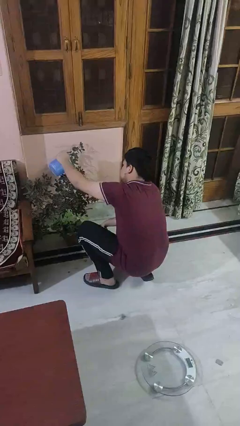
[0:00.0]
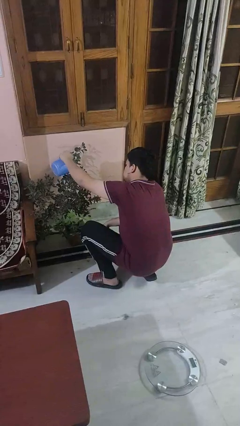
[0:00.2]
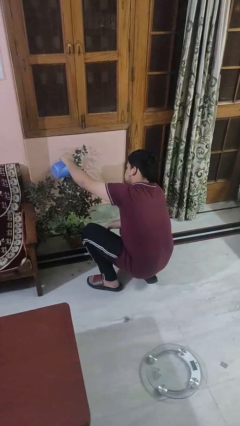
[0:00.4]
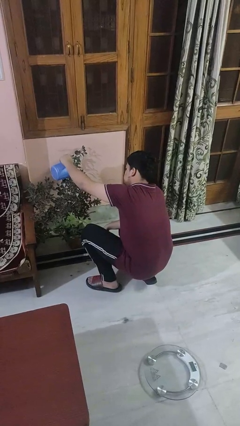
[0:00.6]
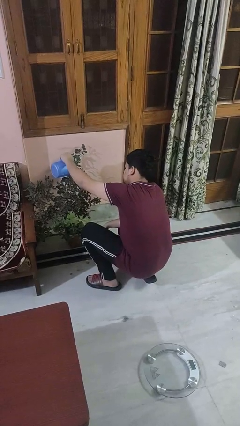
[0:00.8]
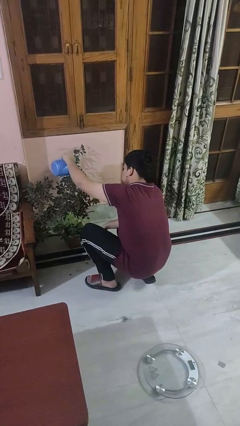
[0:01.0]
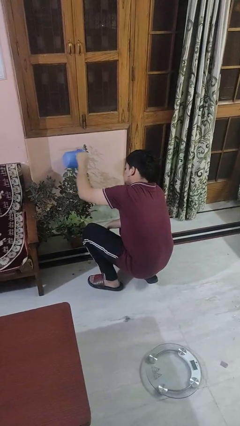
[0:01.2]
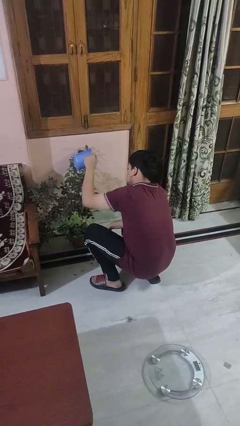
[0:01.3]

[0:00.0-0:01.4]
person waters houseplant

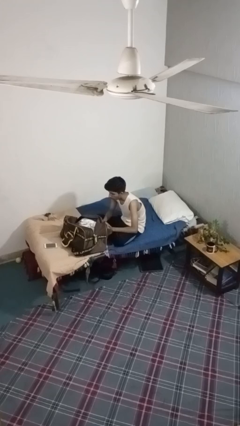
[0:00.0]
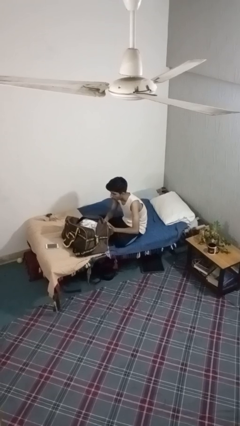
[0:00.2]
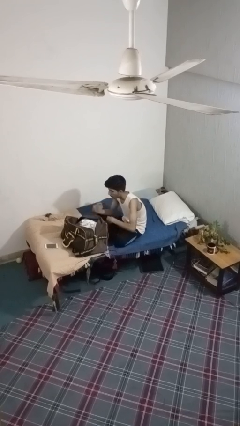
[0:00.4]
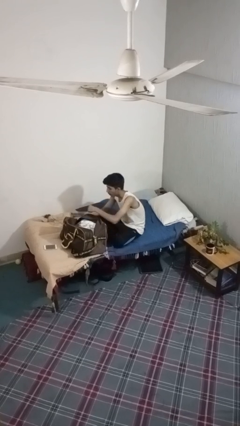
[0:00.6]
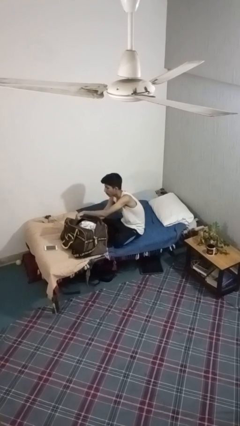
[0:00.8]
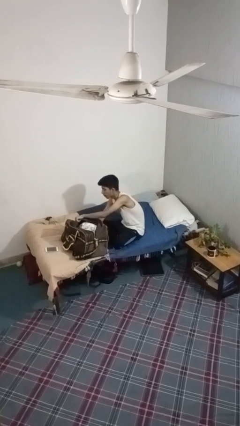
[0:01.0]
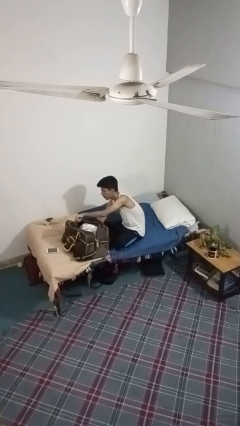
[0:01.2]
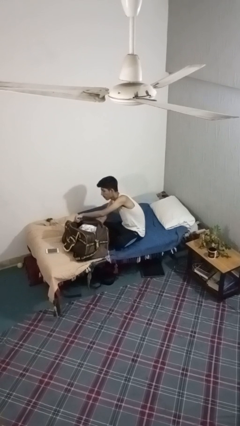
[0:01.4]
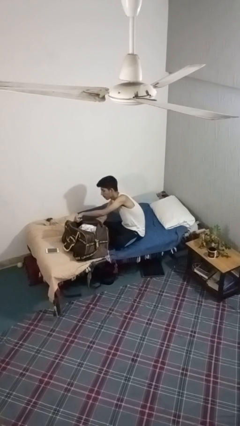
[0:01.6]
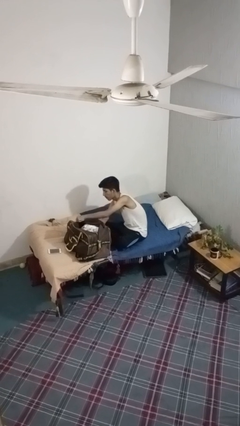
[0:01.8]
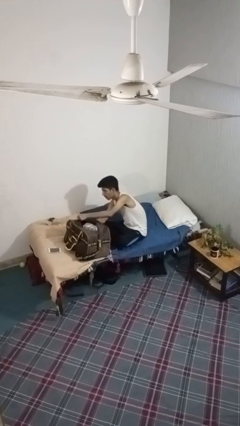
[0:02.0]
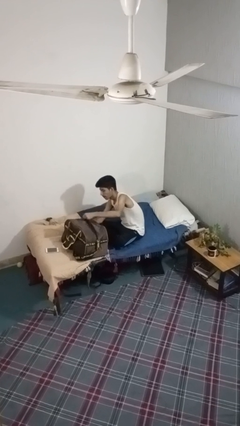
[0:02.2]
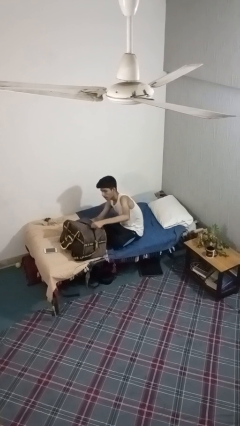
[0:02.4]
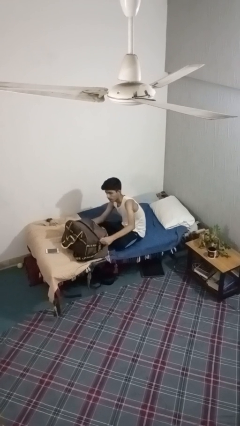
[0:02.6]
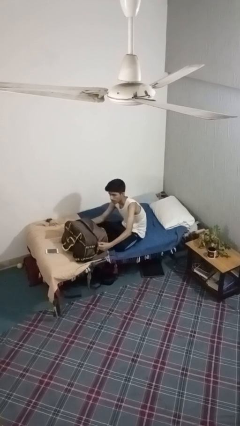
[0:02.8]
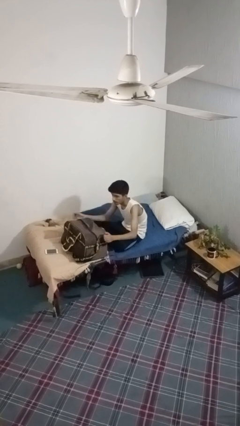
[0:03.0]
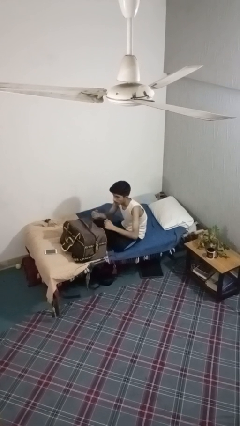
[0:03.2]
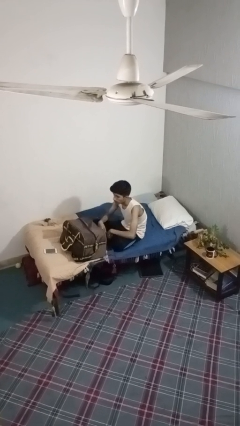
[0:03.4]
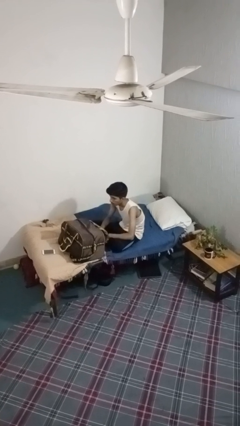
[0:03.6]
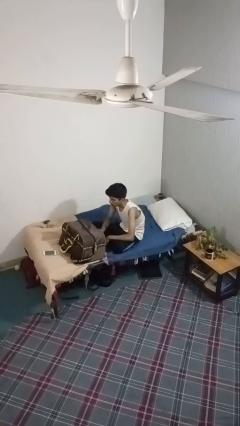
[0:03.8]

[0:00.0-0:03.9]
person closes suitcase

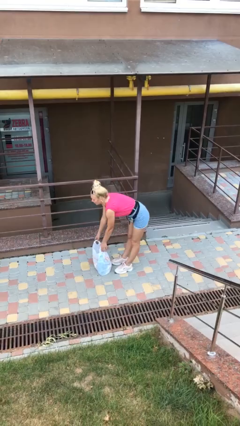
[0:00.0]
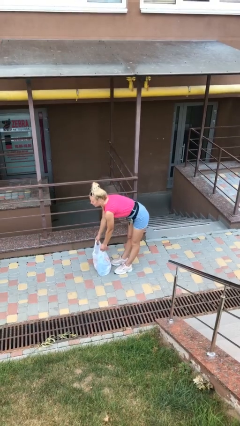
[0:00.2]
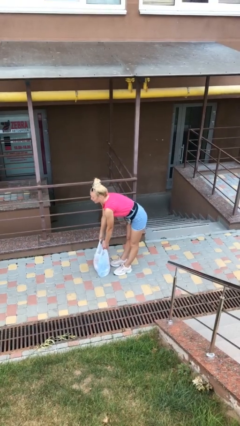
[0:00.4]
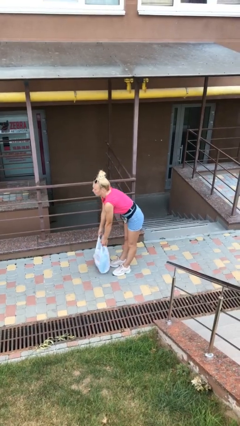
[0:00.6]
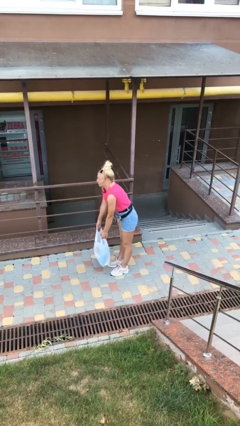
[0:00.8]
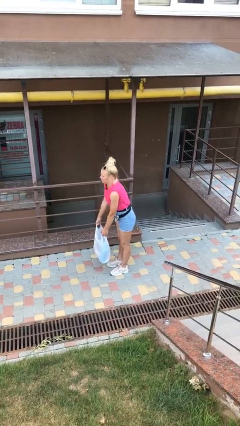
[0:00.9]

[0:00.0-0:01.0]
person picks up object from floor

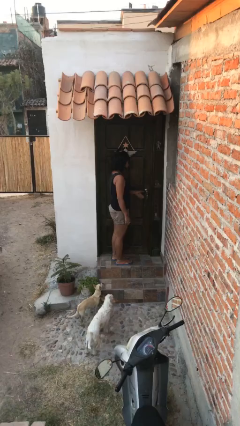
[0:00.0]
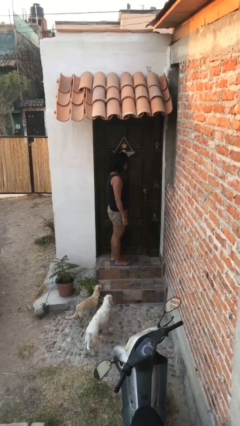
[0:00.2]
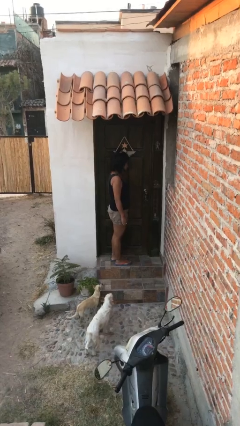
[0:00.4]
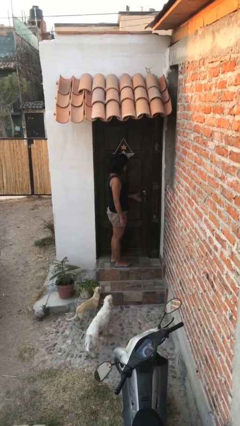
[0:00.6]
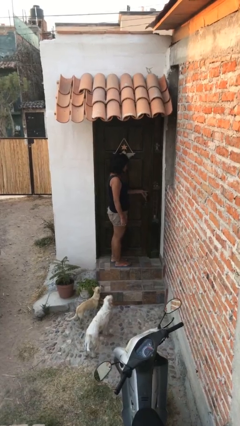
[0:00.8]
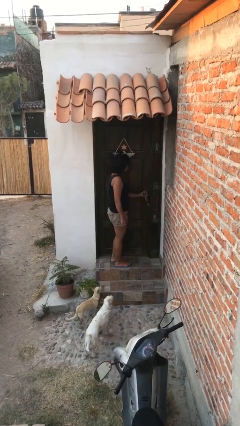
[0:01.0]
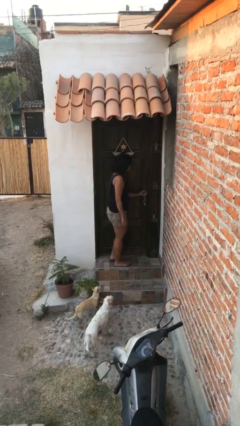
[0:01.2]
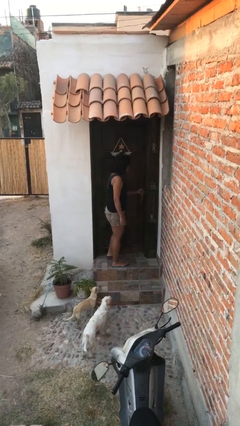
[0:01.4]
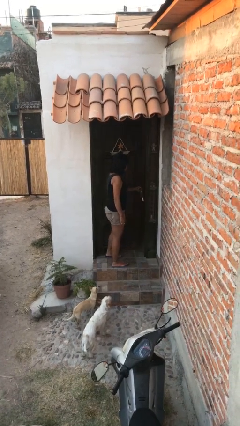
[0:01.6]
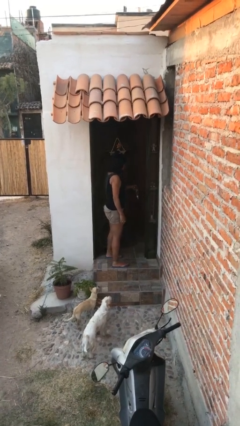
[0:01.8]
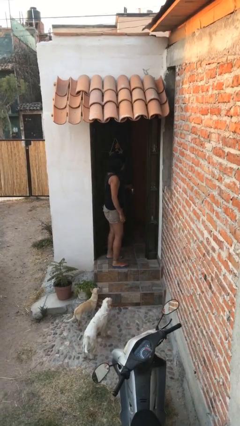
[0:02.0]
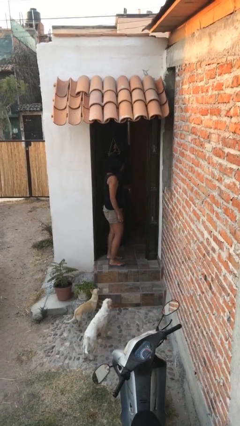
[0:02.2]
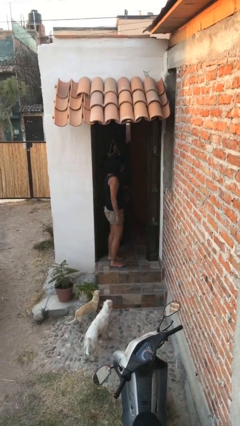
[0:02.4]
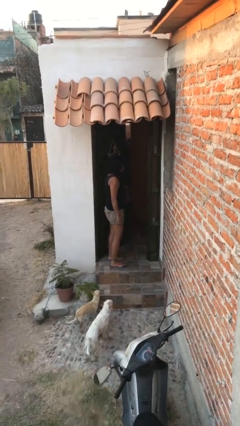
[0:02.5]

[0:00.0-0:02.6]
person opens facility door

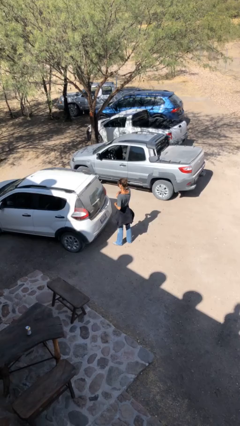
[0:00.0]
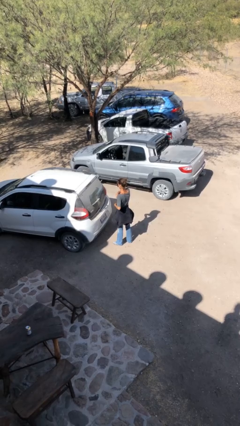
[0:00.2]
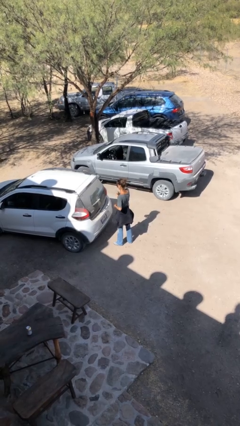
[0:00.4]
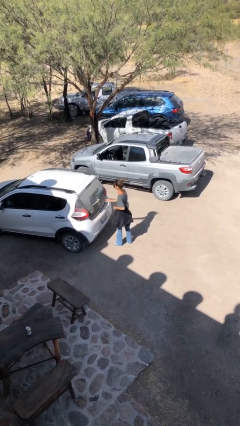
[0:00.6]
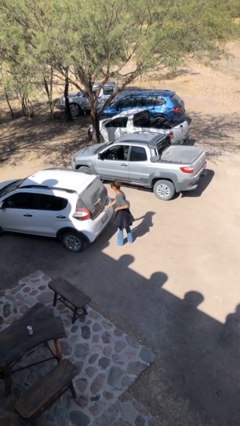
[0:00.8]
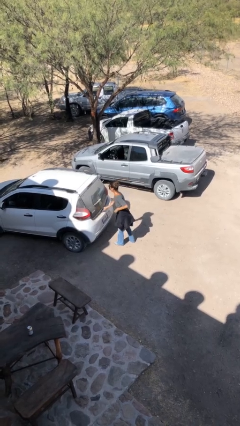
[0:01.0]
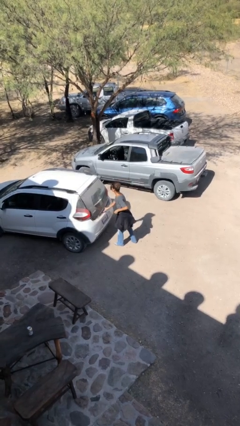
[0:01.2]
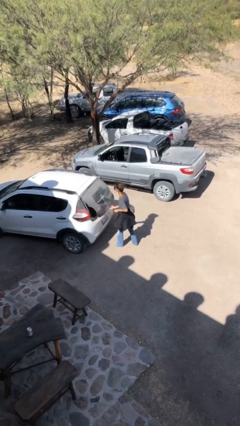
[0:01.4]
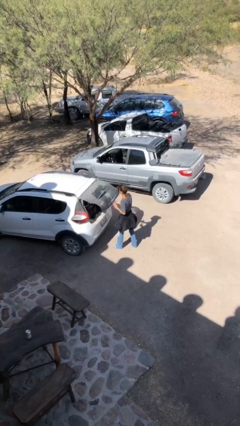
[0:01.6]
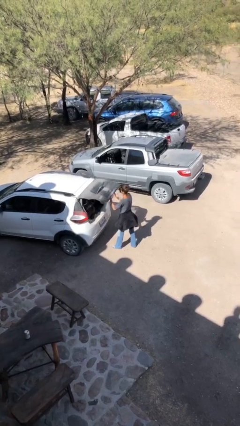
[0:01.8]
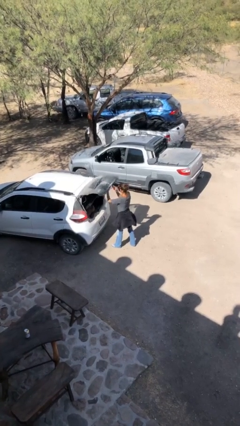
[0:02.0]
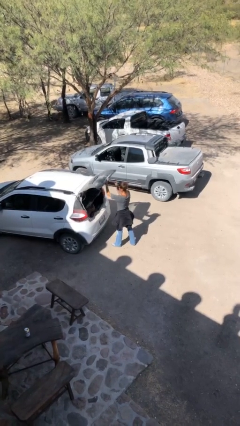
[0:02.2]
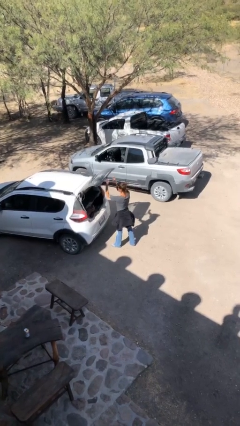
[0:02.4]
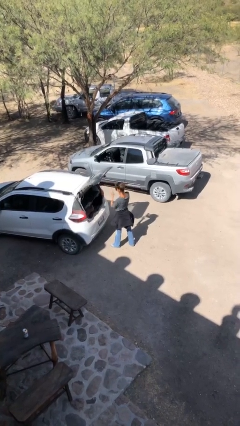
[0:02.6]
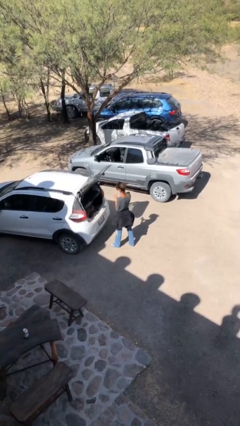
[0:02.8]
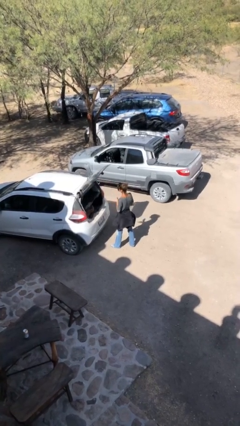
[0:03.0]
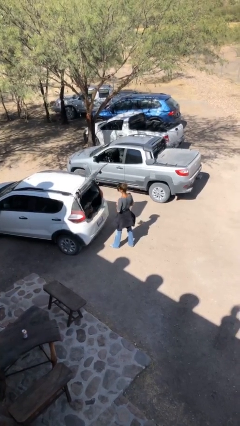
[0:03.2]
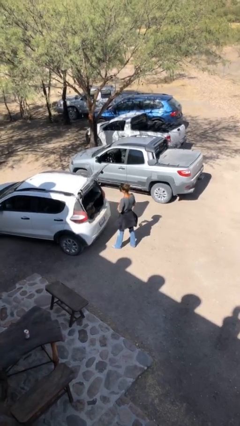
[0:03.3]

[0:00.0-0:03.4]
person opens car trunk

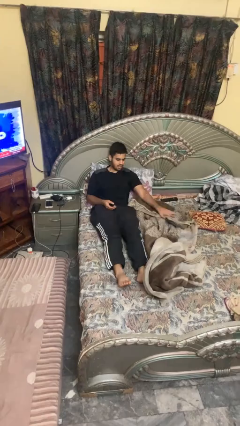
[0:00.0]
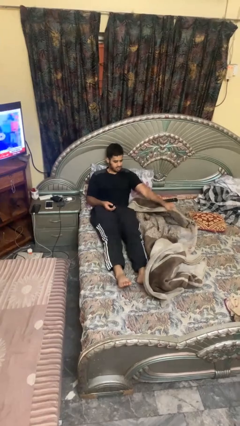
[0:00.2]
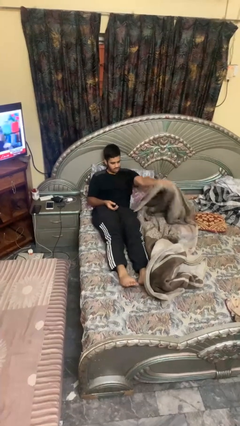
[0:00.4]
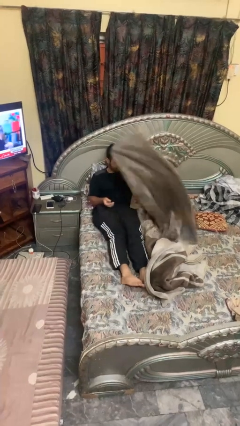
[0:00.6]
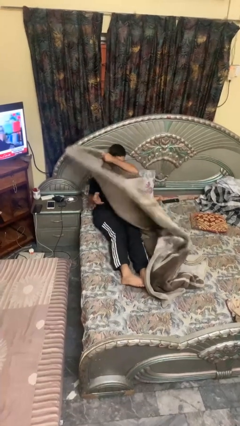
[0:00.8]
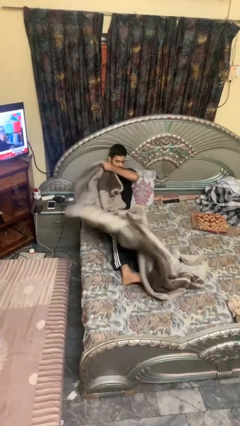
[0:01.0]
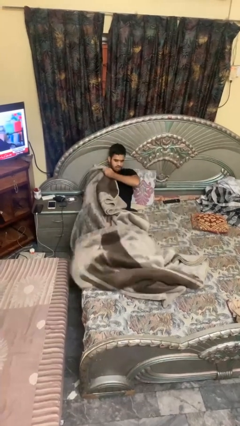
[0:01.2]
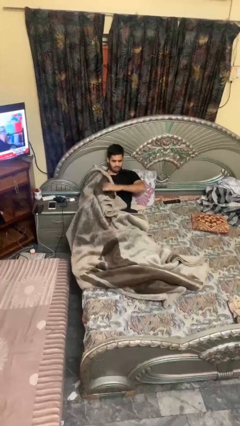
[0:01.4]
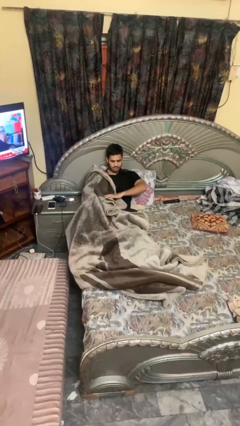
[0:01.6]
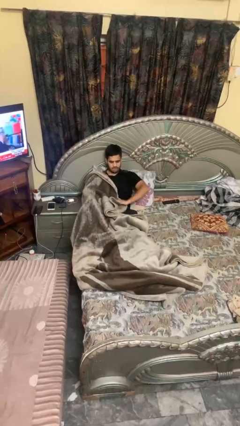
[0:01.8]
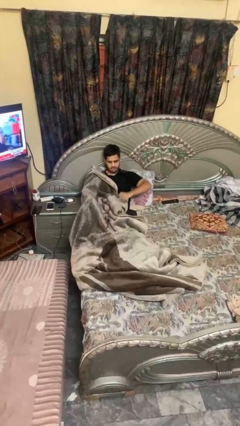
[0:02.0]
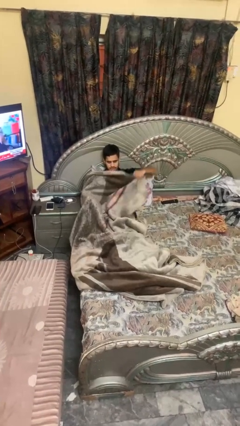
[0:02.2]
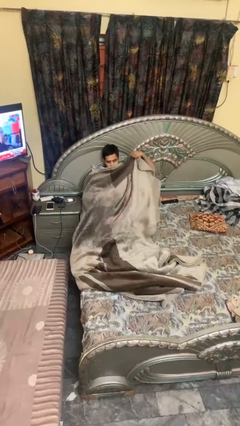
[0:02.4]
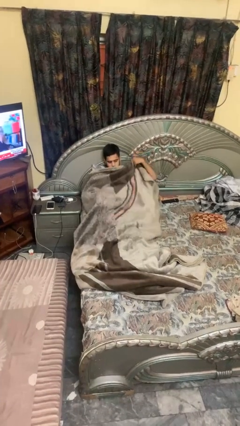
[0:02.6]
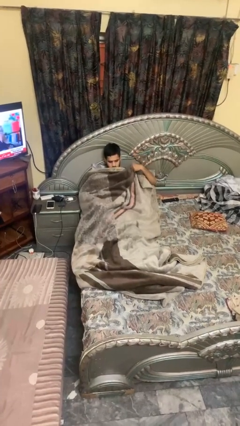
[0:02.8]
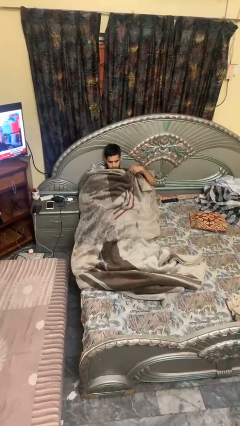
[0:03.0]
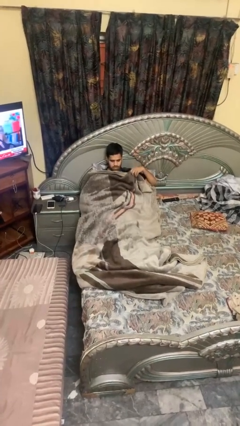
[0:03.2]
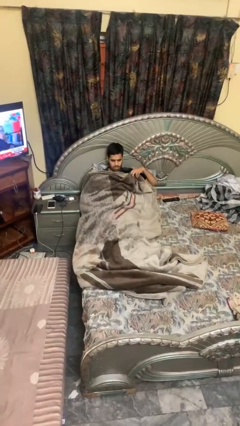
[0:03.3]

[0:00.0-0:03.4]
person covers with blanket

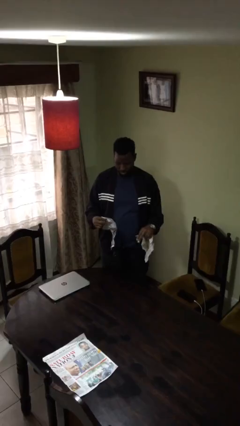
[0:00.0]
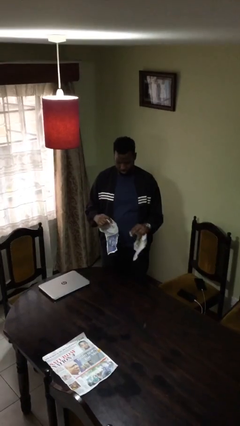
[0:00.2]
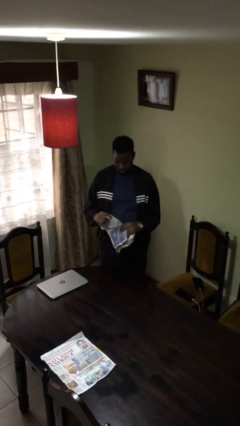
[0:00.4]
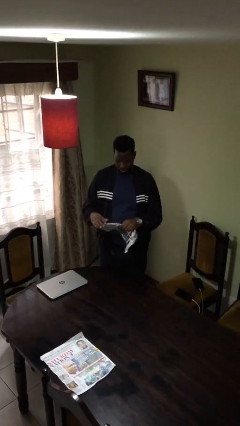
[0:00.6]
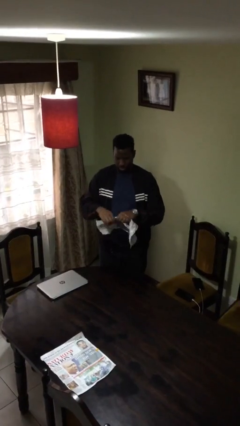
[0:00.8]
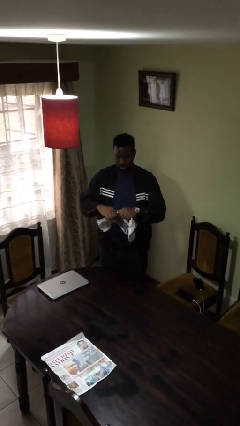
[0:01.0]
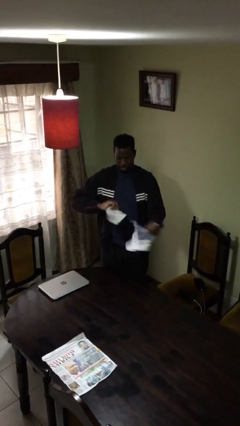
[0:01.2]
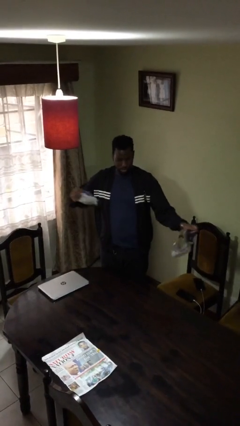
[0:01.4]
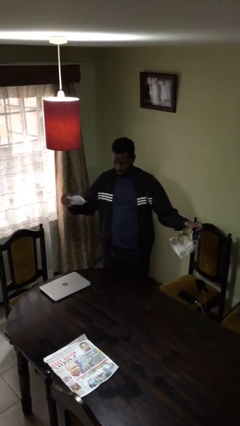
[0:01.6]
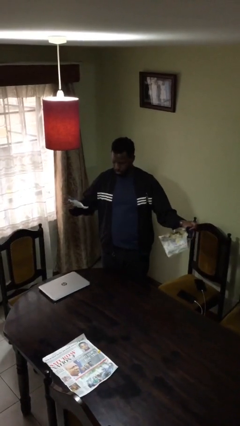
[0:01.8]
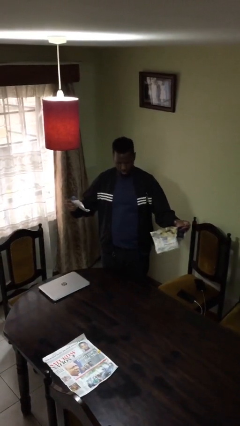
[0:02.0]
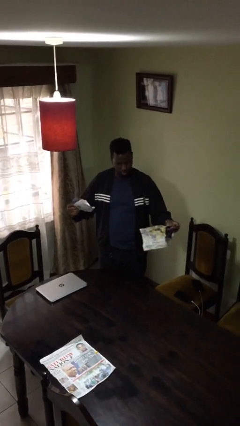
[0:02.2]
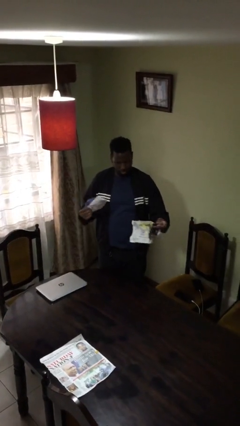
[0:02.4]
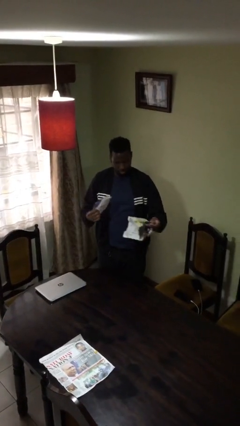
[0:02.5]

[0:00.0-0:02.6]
person tears paper
